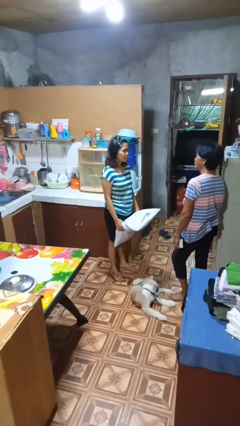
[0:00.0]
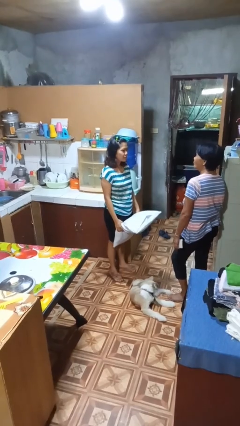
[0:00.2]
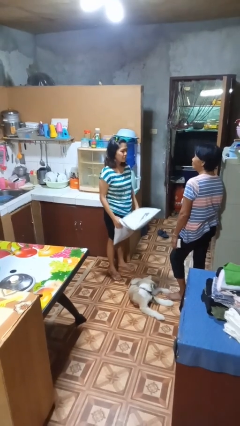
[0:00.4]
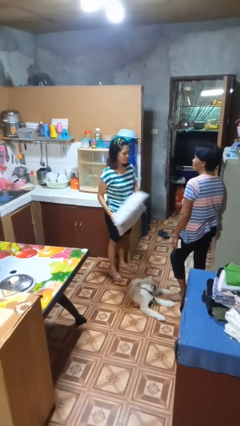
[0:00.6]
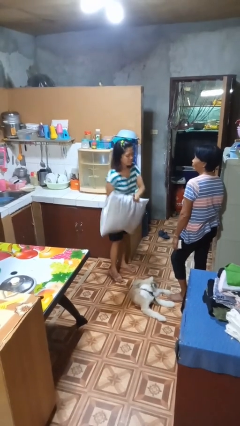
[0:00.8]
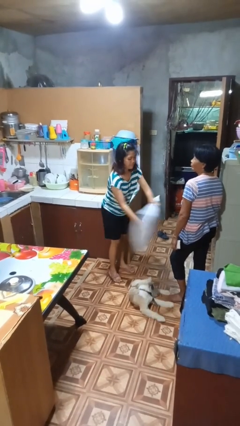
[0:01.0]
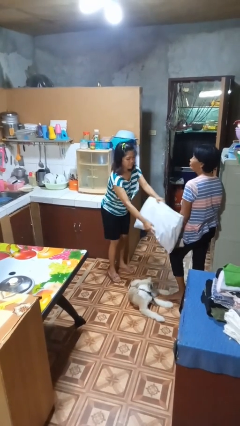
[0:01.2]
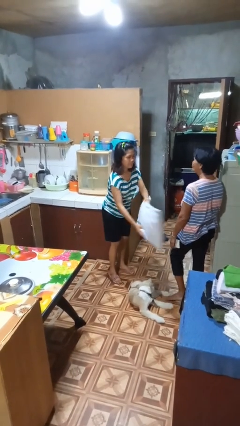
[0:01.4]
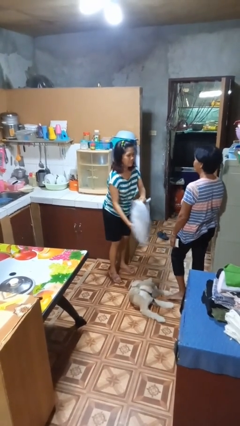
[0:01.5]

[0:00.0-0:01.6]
person hits person with pillow

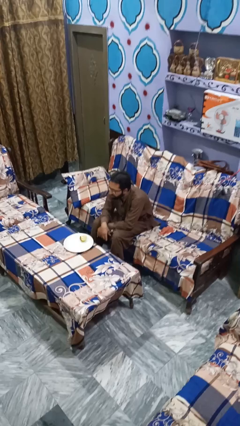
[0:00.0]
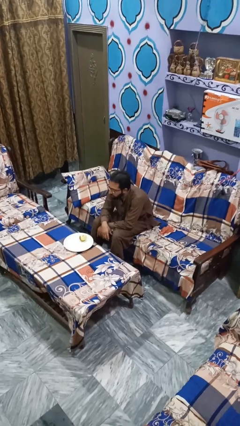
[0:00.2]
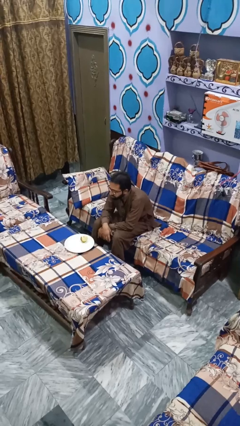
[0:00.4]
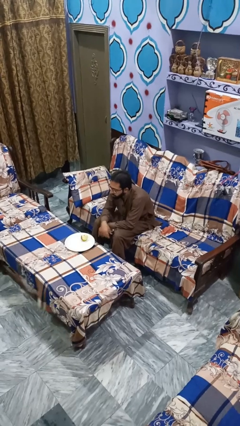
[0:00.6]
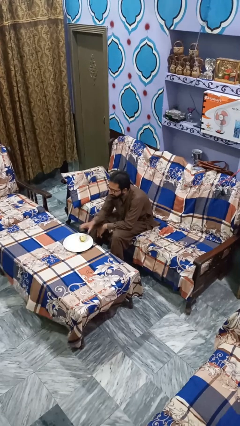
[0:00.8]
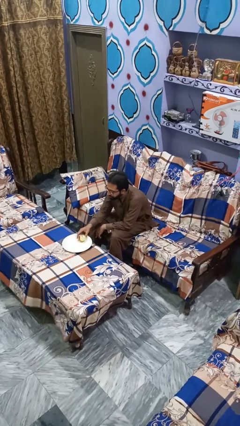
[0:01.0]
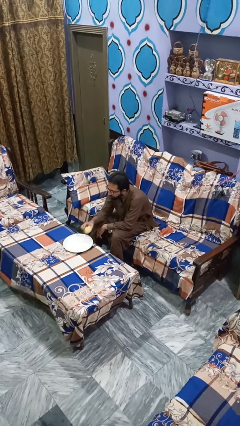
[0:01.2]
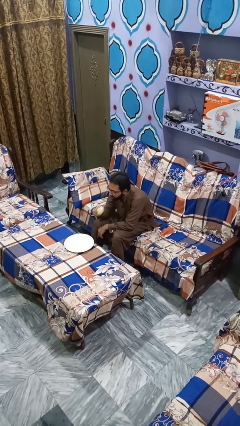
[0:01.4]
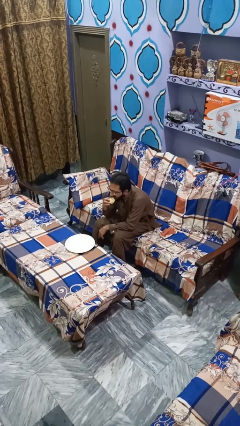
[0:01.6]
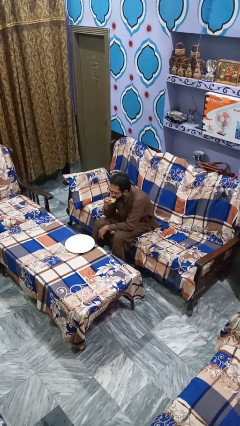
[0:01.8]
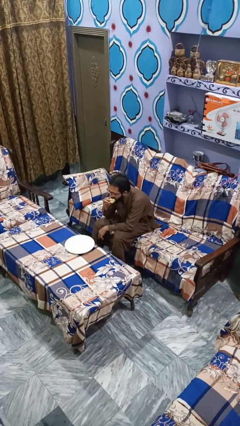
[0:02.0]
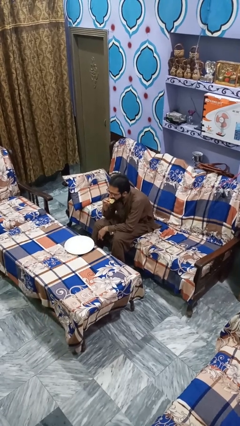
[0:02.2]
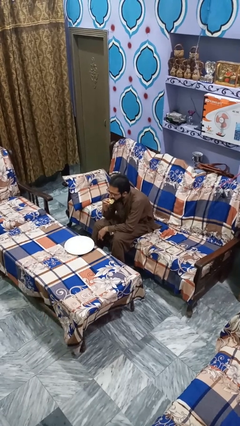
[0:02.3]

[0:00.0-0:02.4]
person eats apple

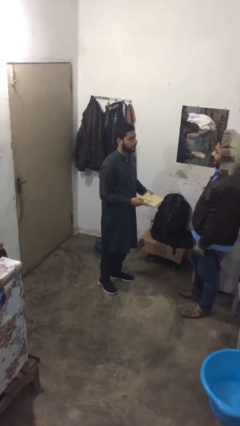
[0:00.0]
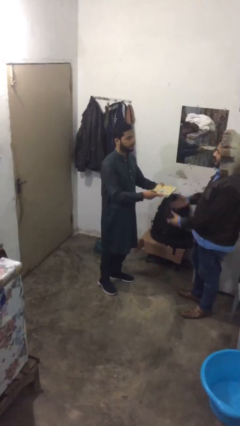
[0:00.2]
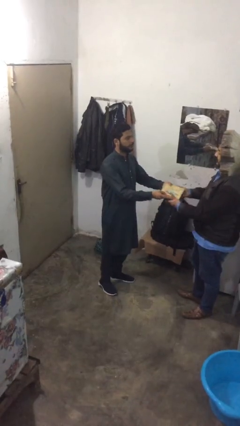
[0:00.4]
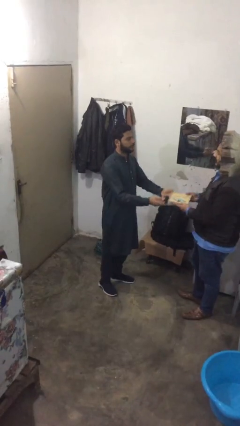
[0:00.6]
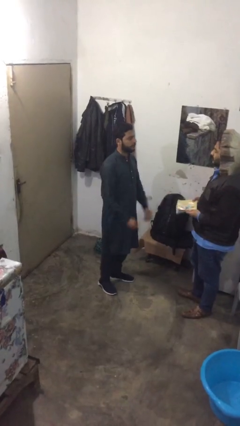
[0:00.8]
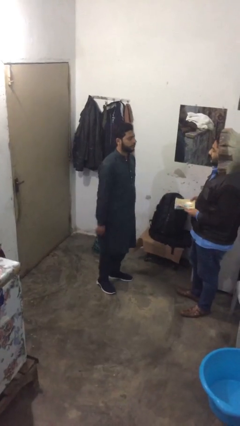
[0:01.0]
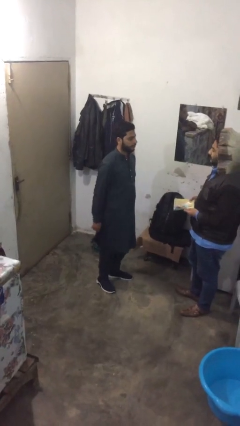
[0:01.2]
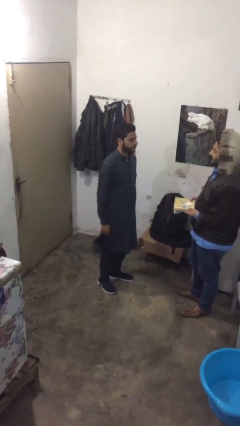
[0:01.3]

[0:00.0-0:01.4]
person transfers object to person

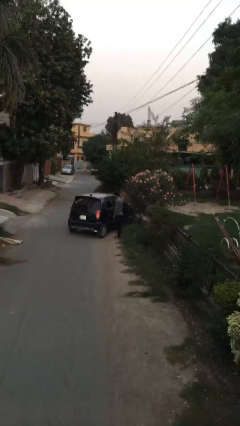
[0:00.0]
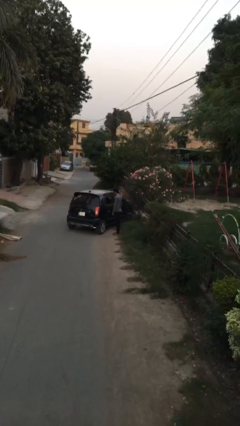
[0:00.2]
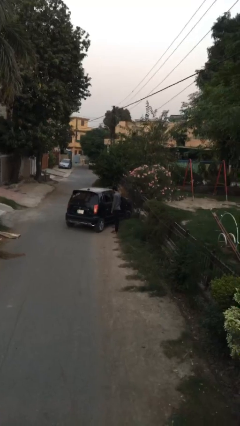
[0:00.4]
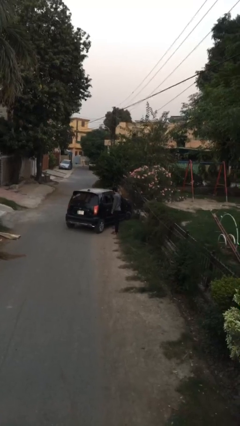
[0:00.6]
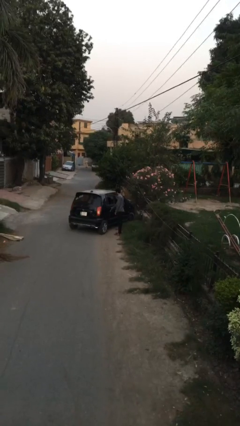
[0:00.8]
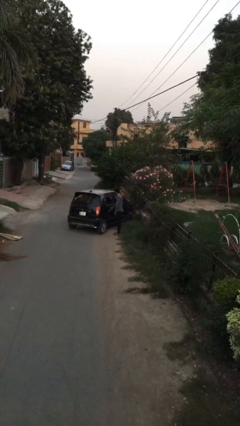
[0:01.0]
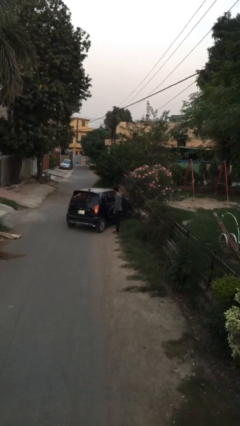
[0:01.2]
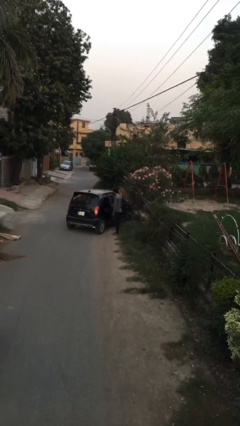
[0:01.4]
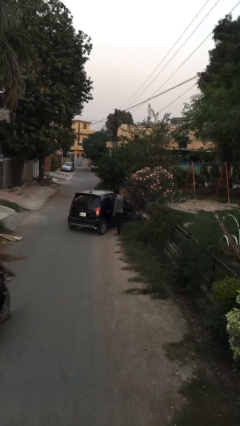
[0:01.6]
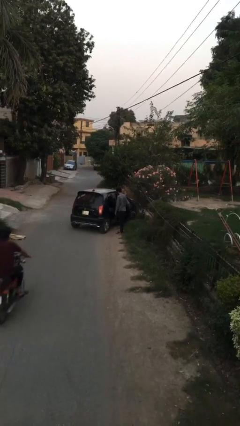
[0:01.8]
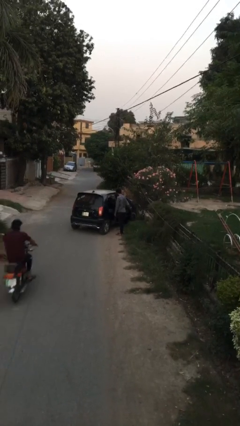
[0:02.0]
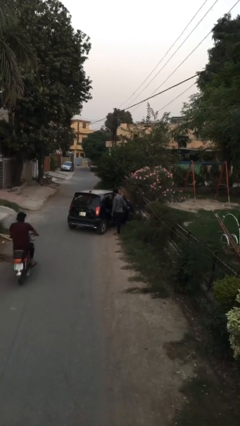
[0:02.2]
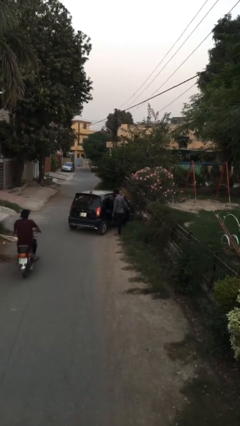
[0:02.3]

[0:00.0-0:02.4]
person opens car door

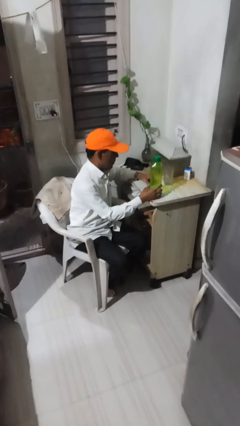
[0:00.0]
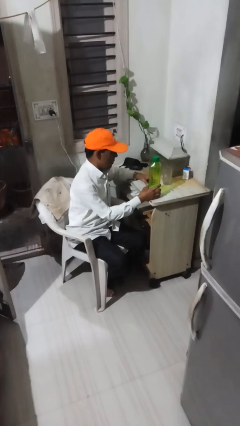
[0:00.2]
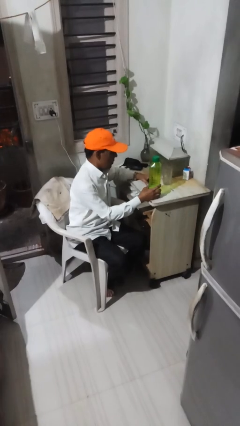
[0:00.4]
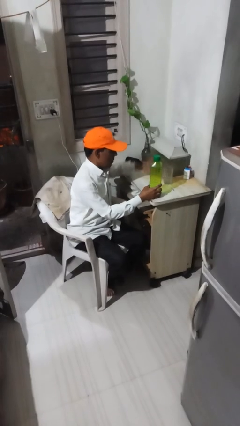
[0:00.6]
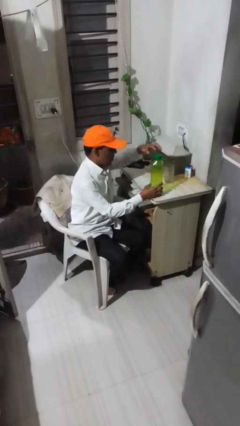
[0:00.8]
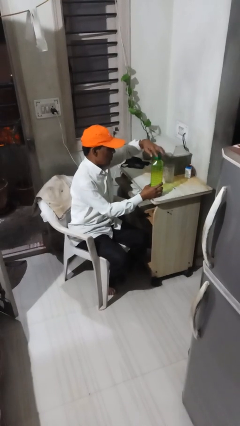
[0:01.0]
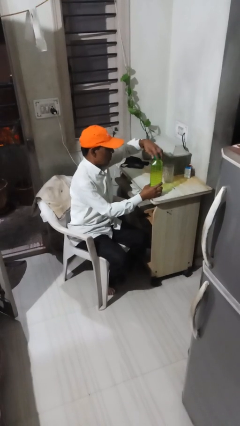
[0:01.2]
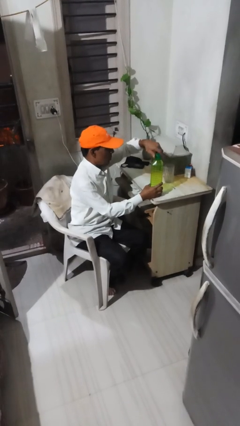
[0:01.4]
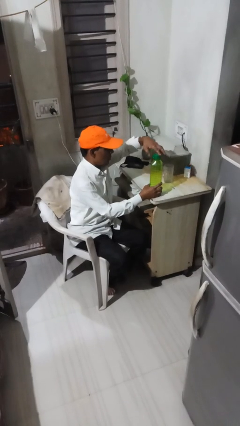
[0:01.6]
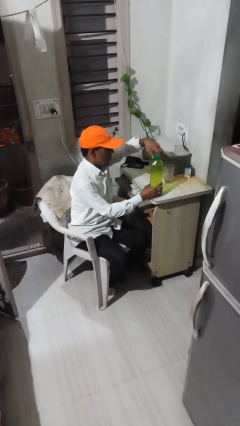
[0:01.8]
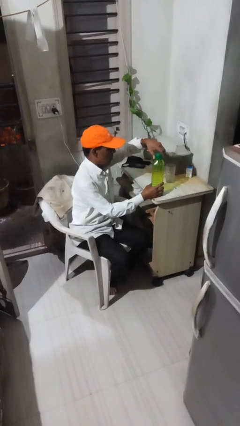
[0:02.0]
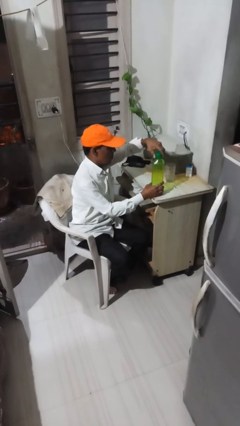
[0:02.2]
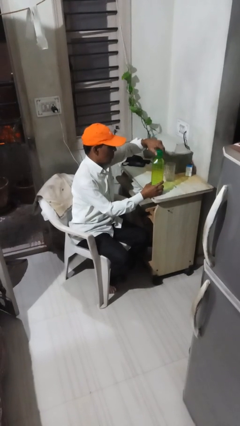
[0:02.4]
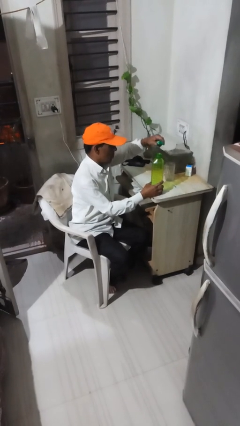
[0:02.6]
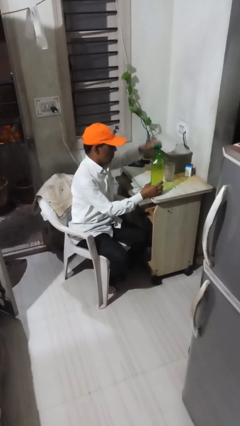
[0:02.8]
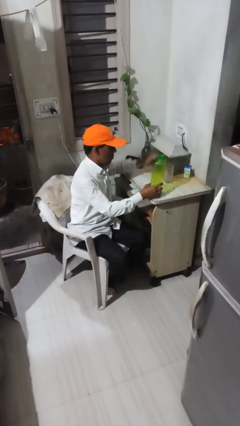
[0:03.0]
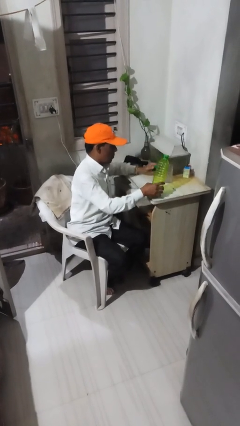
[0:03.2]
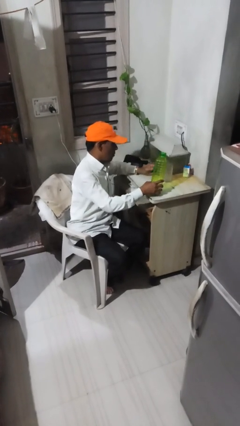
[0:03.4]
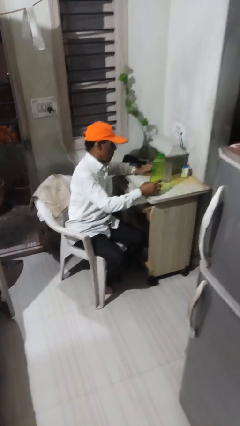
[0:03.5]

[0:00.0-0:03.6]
person unscrews lid from bottle

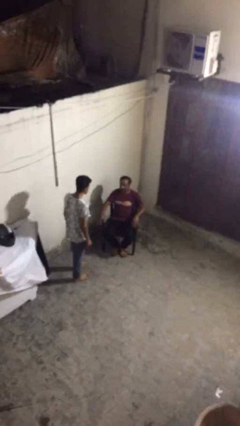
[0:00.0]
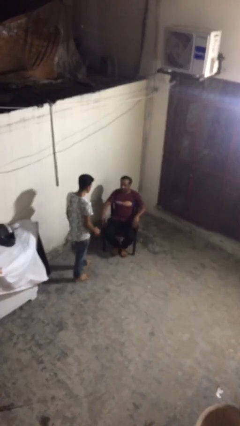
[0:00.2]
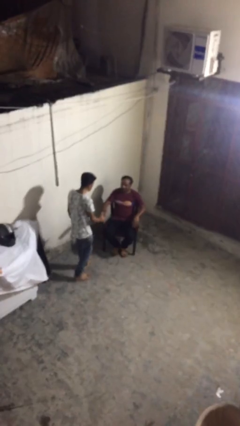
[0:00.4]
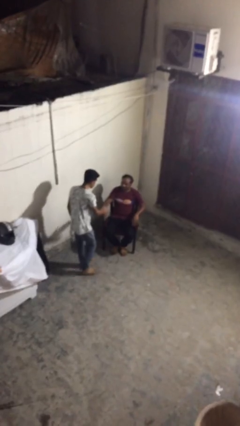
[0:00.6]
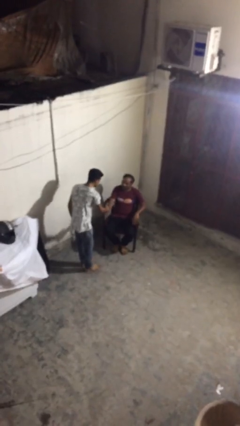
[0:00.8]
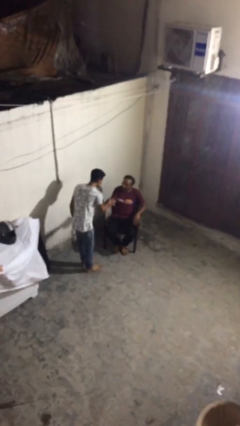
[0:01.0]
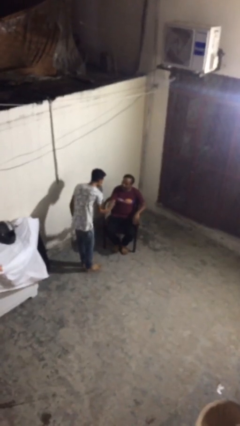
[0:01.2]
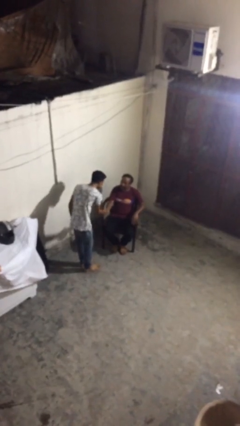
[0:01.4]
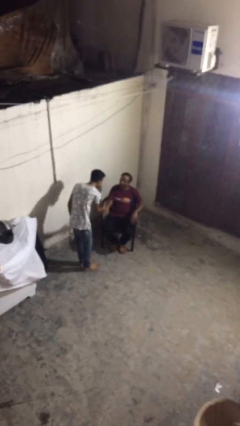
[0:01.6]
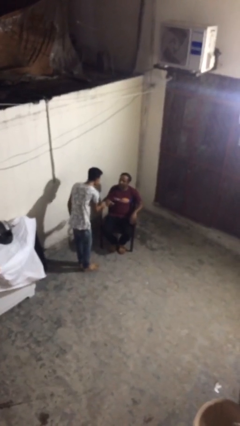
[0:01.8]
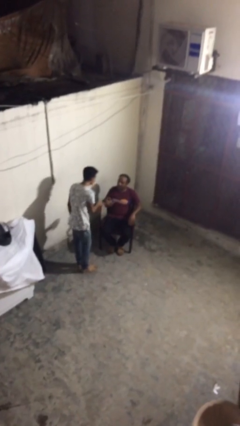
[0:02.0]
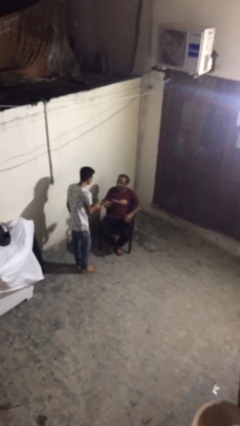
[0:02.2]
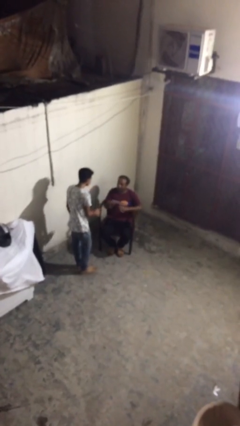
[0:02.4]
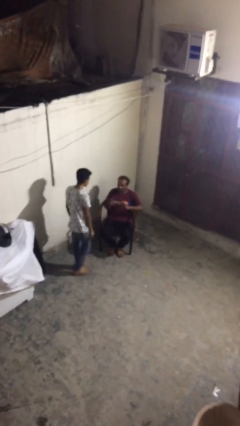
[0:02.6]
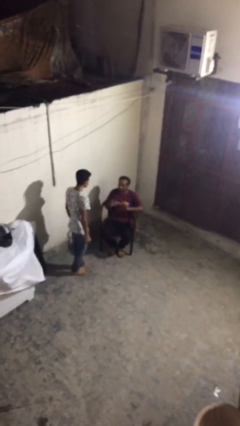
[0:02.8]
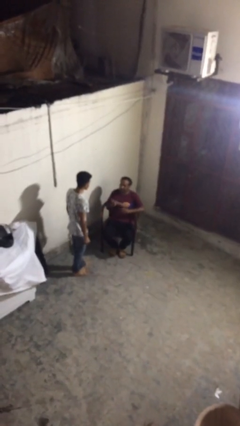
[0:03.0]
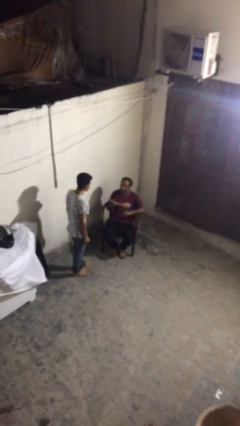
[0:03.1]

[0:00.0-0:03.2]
person shakes hand

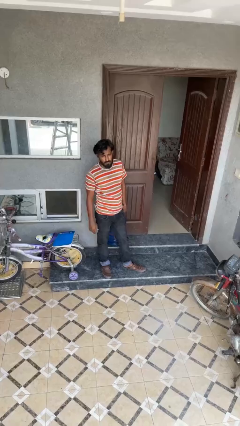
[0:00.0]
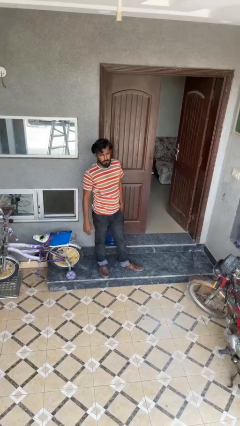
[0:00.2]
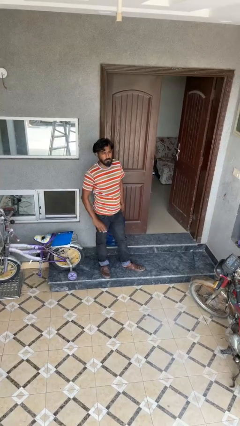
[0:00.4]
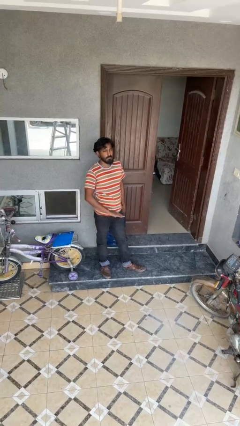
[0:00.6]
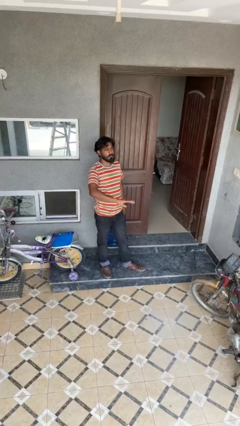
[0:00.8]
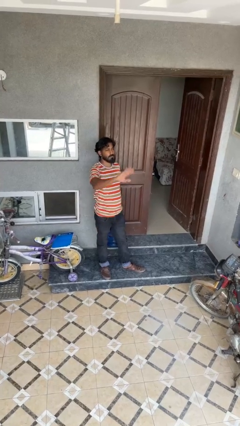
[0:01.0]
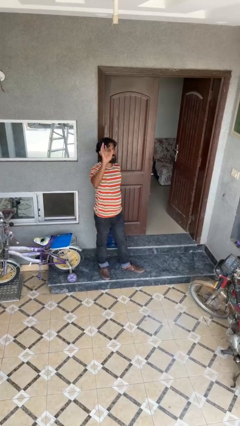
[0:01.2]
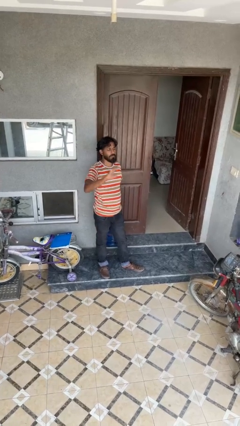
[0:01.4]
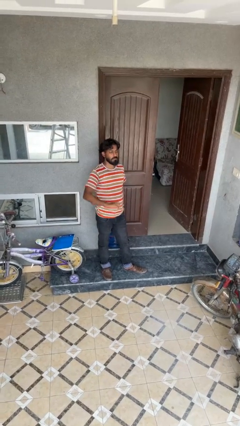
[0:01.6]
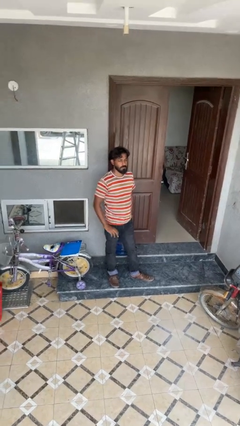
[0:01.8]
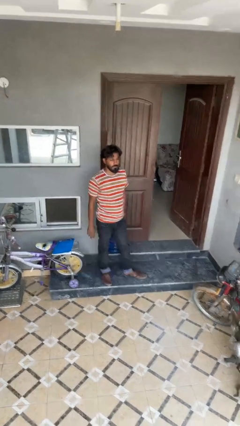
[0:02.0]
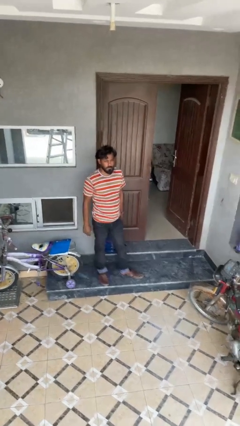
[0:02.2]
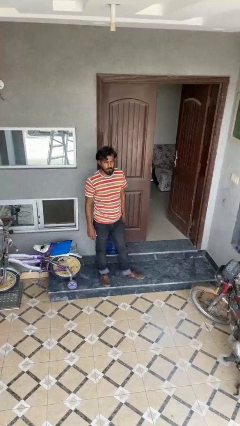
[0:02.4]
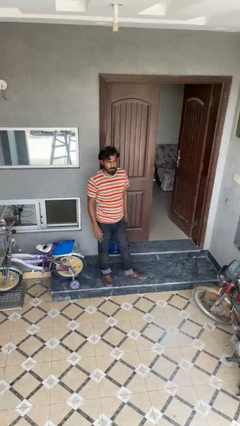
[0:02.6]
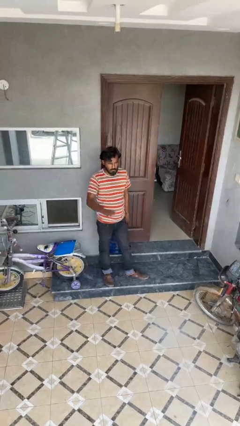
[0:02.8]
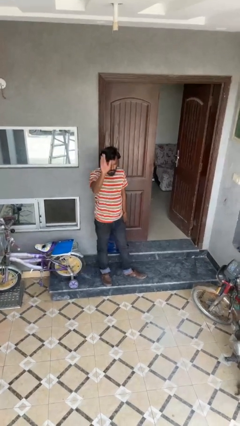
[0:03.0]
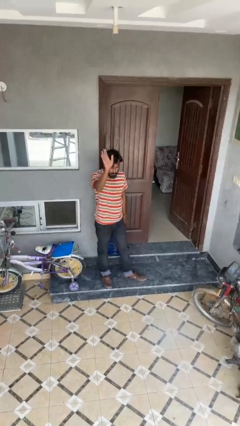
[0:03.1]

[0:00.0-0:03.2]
person gestures swipe up
